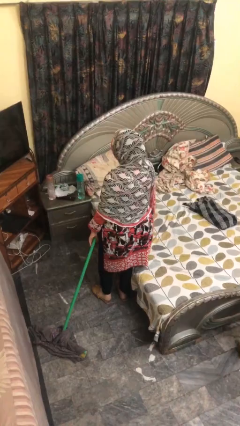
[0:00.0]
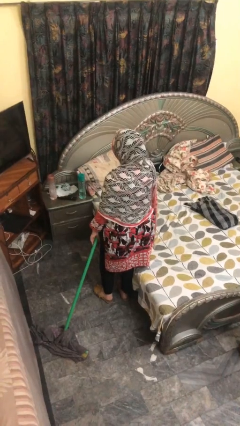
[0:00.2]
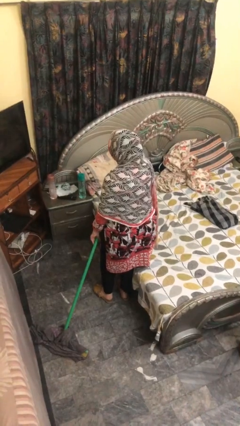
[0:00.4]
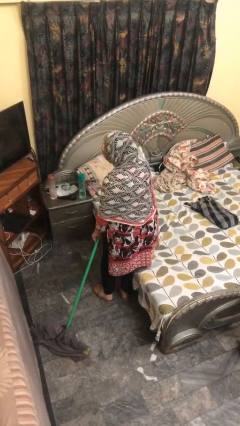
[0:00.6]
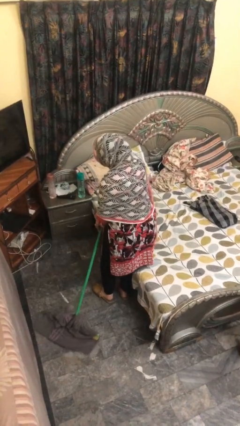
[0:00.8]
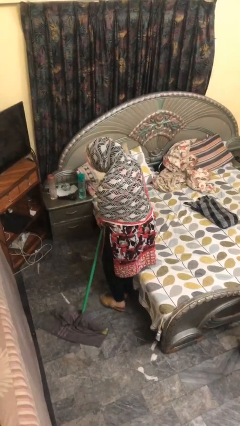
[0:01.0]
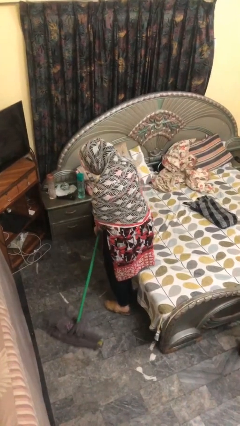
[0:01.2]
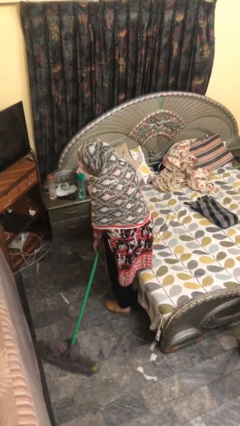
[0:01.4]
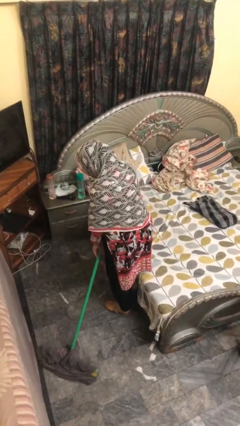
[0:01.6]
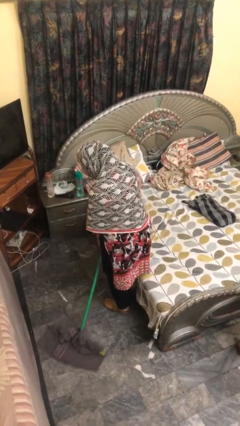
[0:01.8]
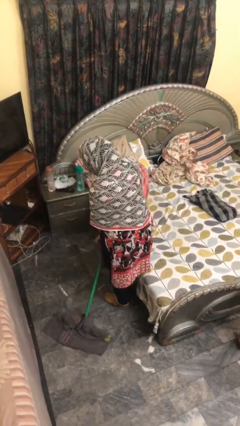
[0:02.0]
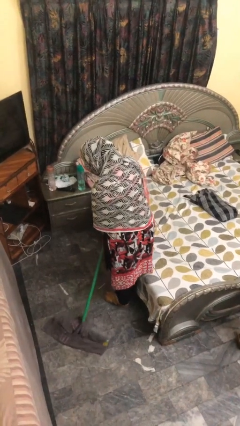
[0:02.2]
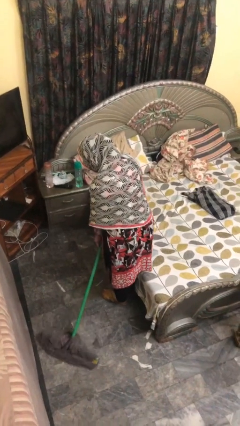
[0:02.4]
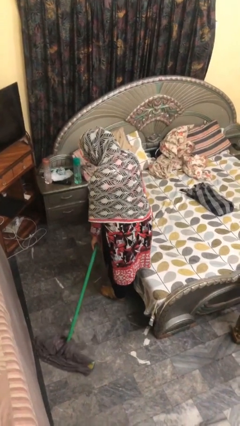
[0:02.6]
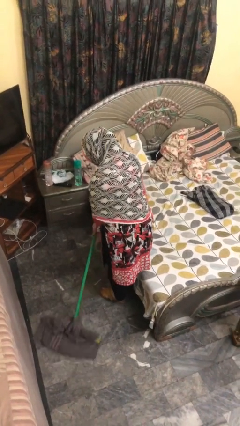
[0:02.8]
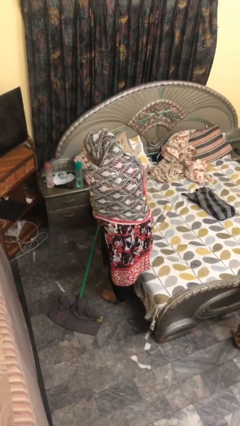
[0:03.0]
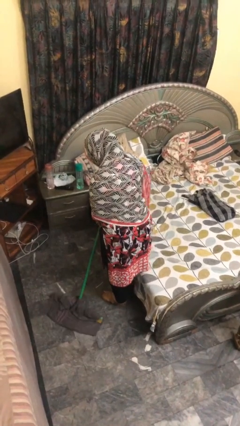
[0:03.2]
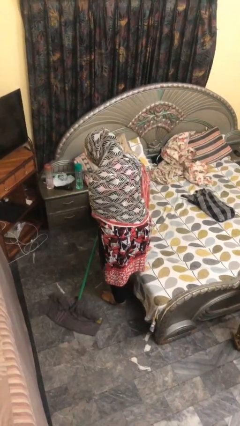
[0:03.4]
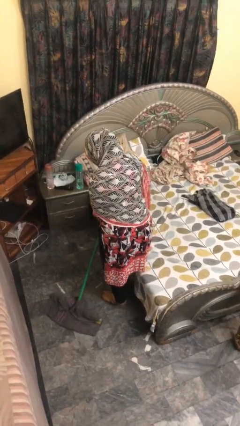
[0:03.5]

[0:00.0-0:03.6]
person mops

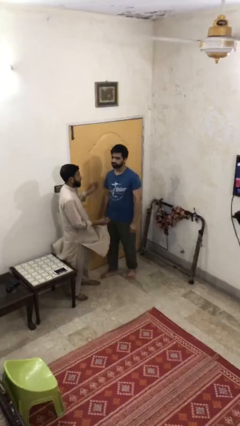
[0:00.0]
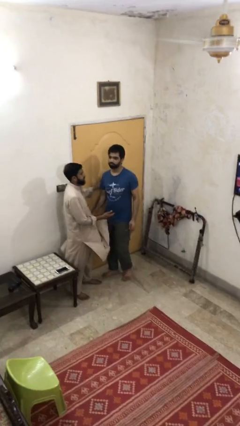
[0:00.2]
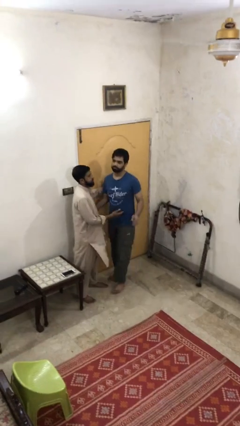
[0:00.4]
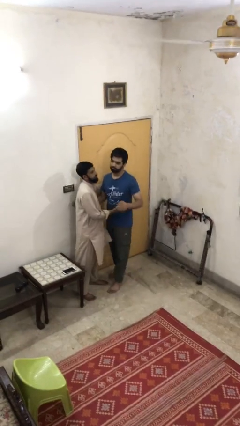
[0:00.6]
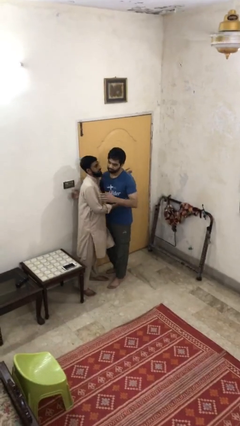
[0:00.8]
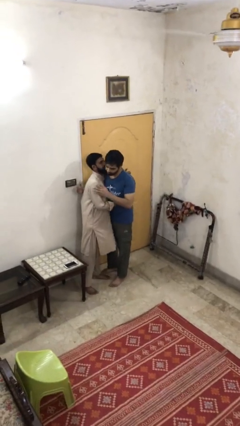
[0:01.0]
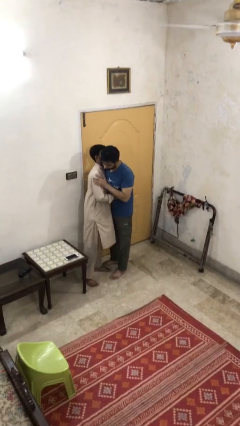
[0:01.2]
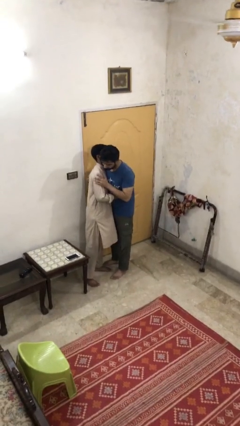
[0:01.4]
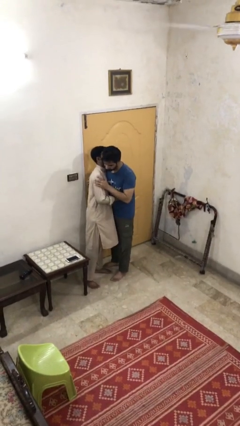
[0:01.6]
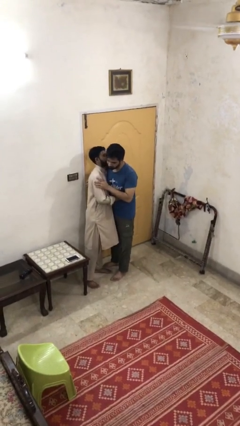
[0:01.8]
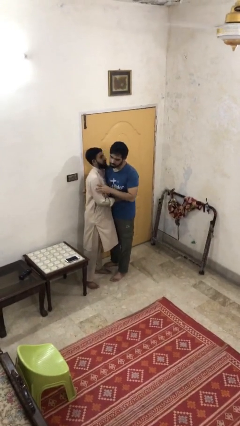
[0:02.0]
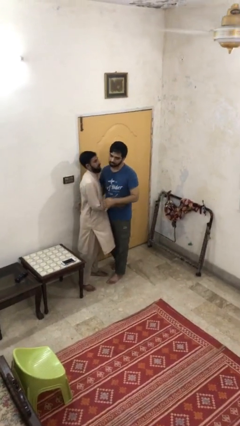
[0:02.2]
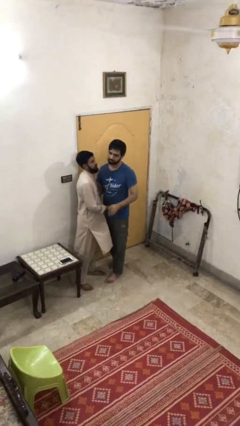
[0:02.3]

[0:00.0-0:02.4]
person embraces person

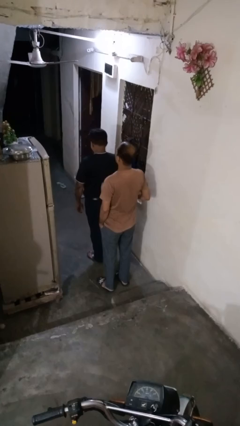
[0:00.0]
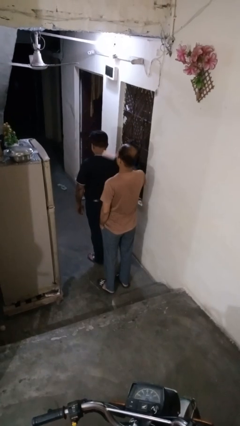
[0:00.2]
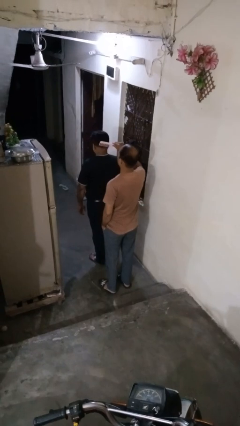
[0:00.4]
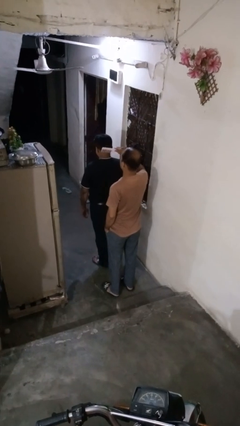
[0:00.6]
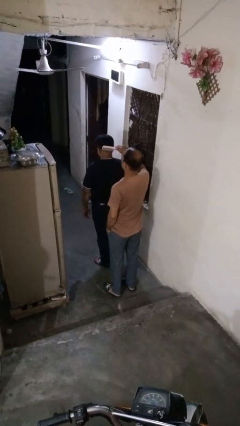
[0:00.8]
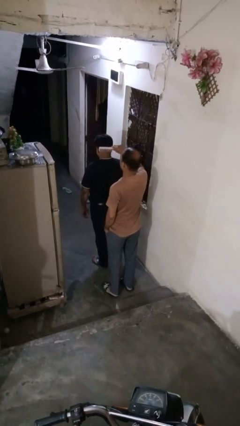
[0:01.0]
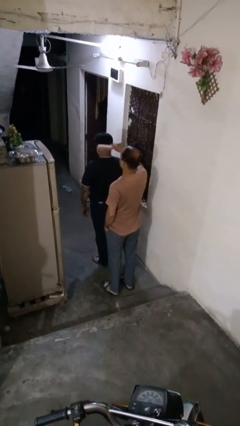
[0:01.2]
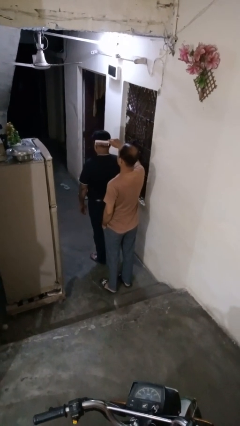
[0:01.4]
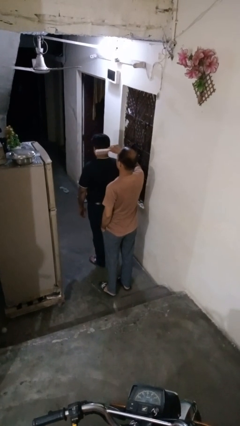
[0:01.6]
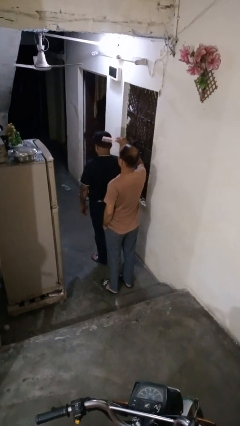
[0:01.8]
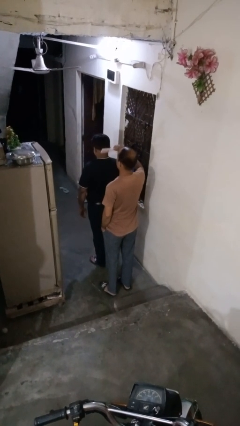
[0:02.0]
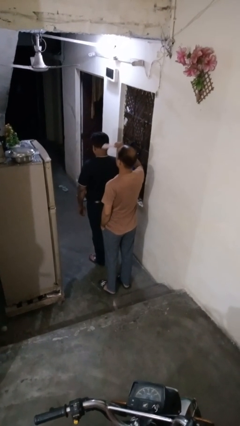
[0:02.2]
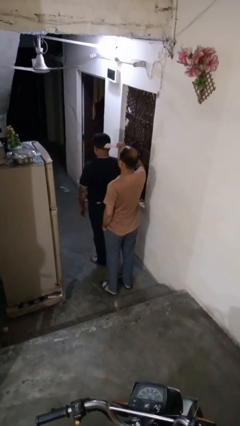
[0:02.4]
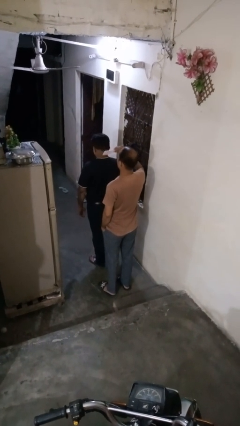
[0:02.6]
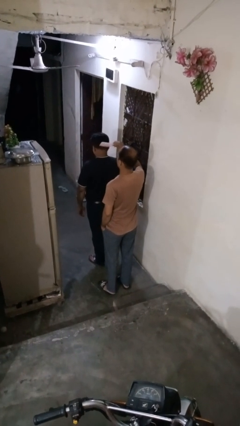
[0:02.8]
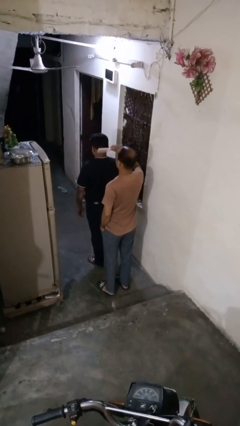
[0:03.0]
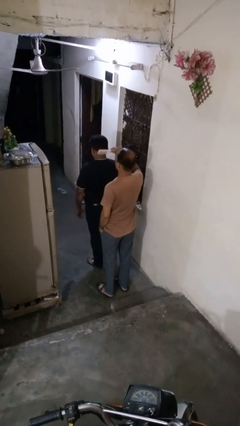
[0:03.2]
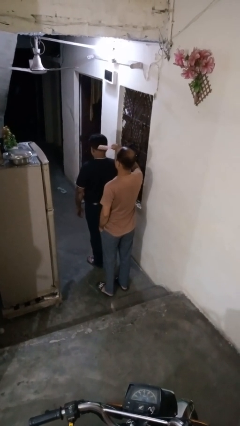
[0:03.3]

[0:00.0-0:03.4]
person brushes hair of person

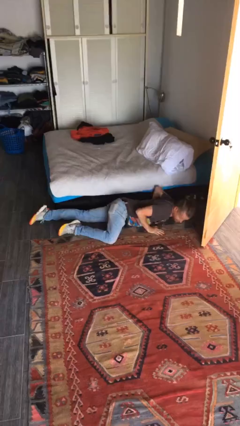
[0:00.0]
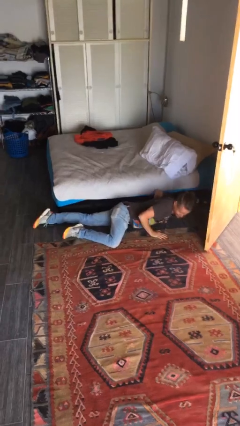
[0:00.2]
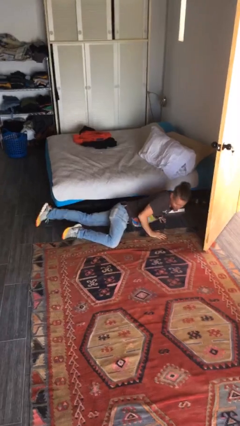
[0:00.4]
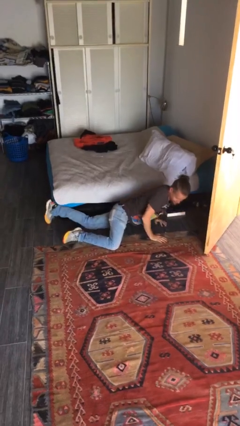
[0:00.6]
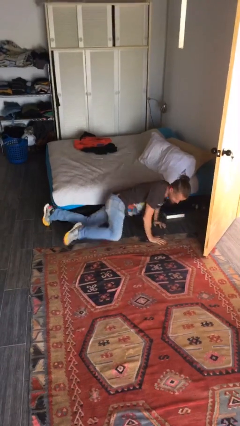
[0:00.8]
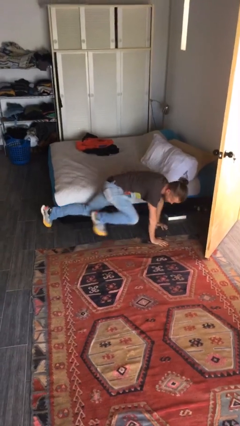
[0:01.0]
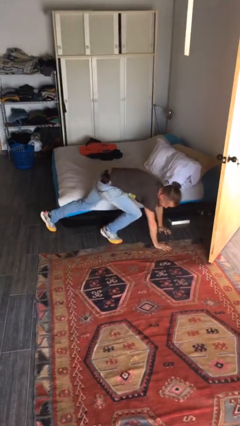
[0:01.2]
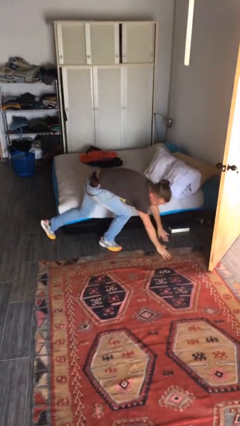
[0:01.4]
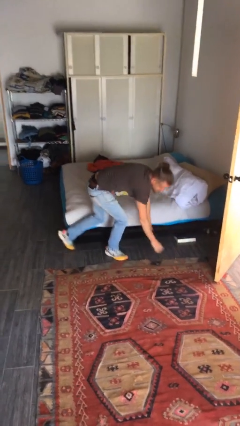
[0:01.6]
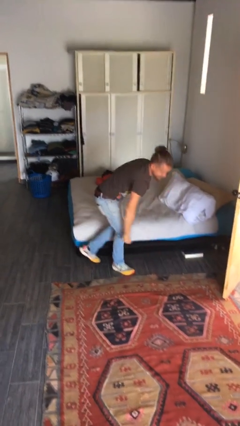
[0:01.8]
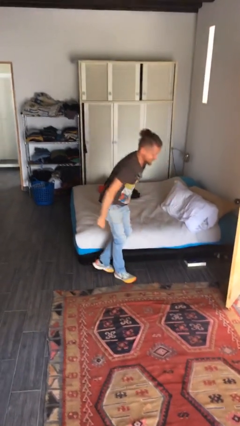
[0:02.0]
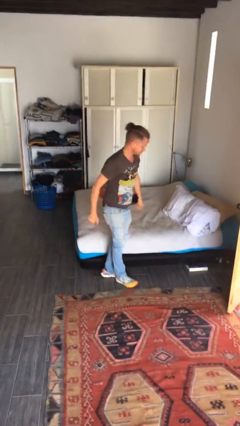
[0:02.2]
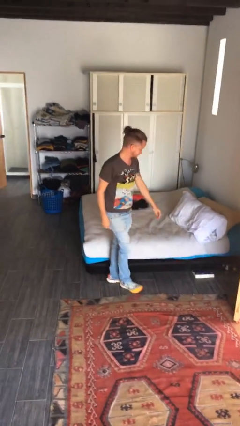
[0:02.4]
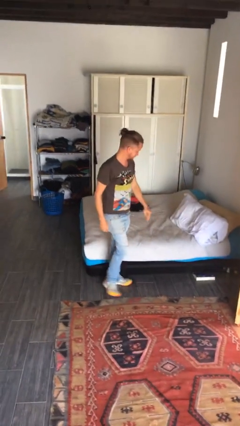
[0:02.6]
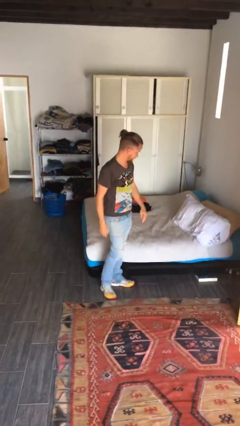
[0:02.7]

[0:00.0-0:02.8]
person stands up from floor

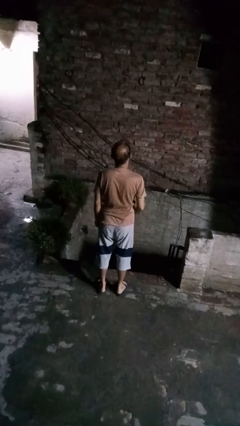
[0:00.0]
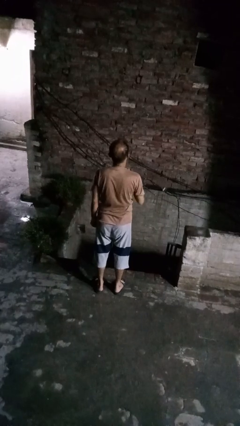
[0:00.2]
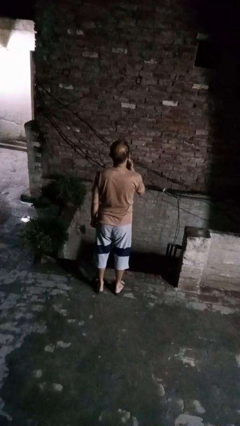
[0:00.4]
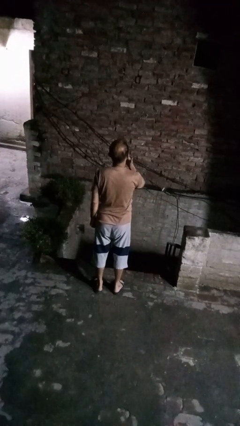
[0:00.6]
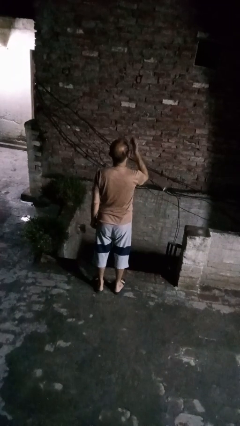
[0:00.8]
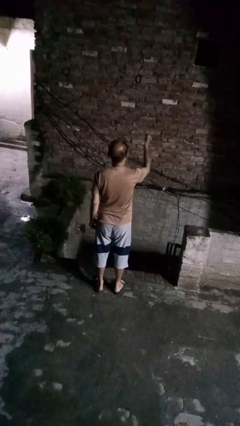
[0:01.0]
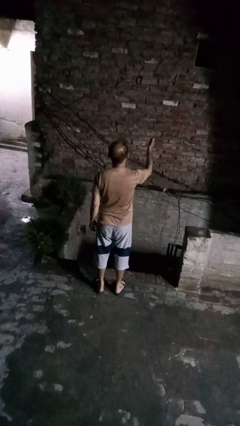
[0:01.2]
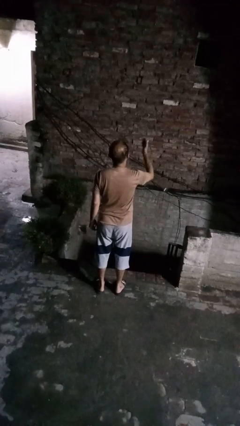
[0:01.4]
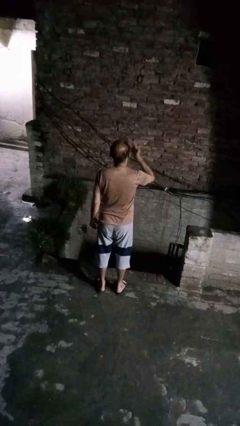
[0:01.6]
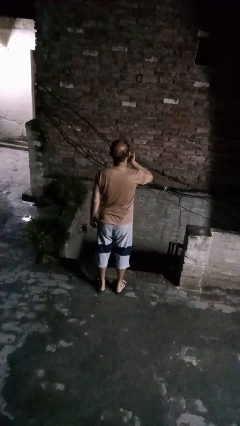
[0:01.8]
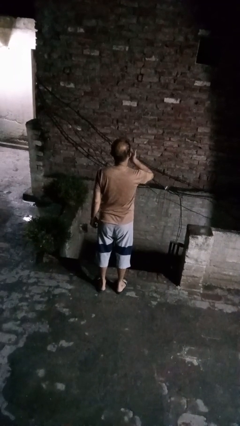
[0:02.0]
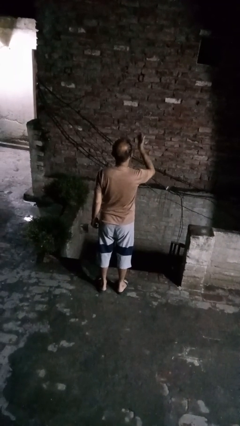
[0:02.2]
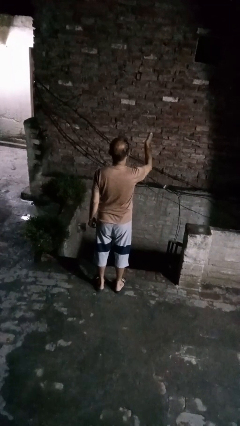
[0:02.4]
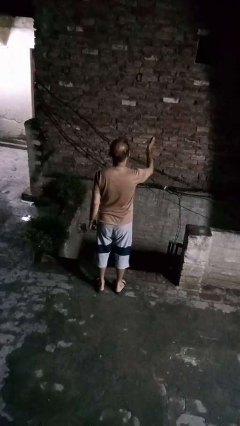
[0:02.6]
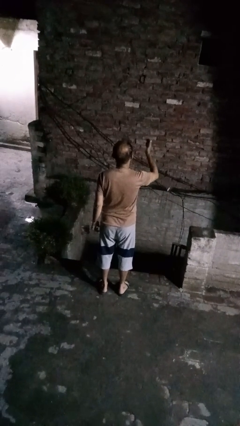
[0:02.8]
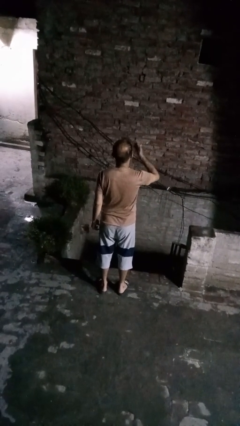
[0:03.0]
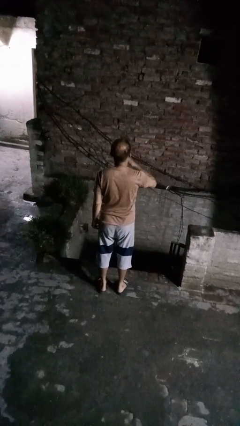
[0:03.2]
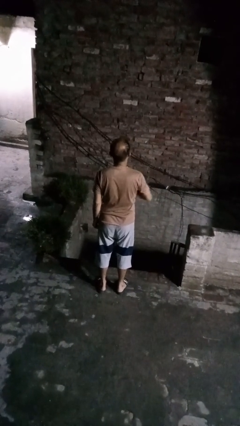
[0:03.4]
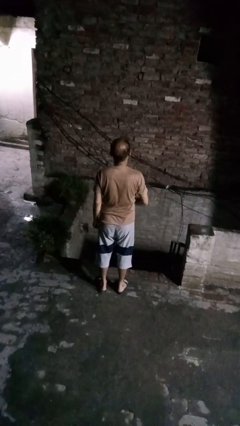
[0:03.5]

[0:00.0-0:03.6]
person gestures blow kiss

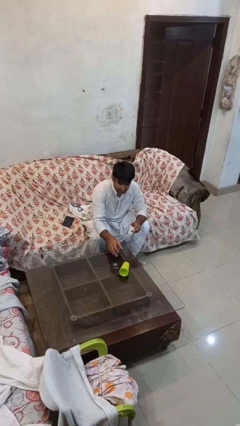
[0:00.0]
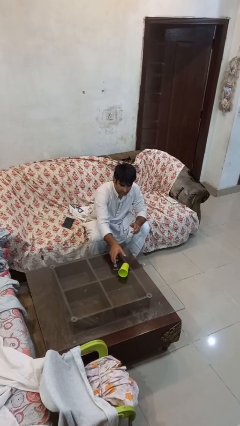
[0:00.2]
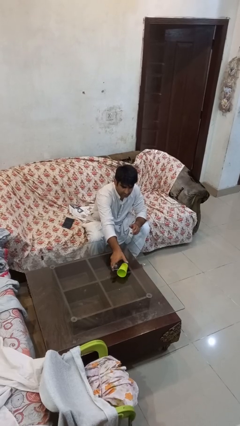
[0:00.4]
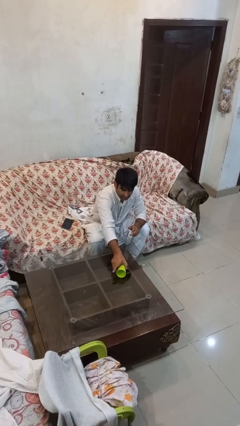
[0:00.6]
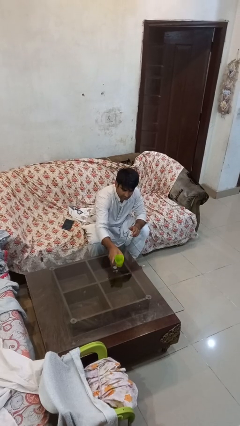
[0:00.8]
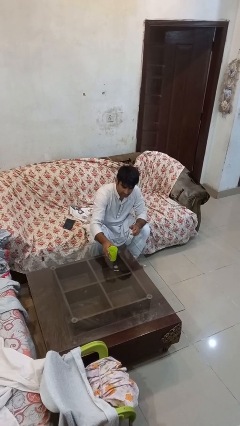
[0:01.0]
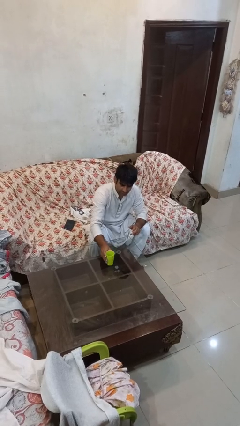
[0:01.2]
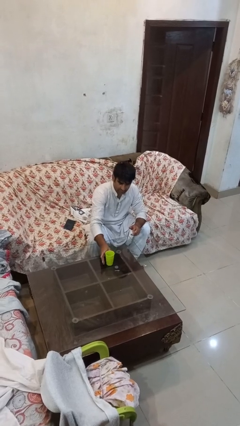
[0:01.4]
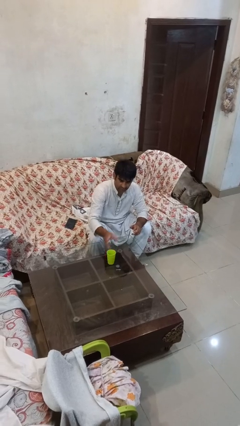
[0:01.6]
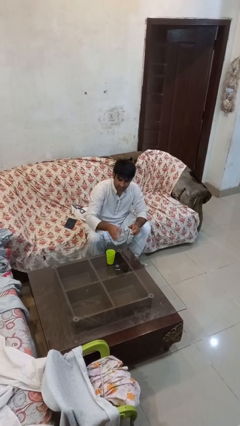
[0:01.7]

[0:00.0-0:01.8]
person sets upright glass

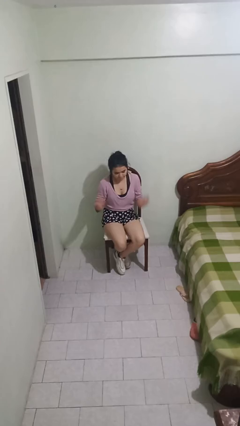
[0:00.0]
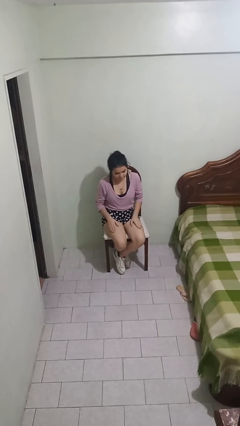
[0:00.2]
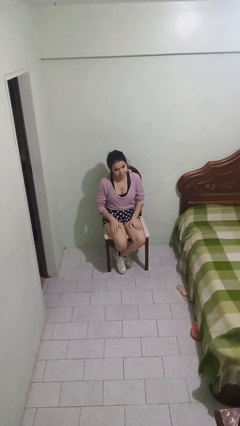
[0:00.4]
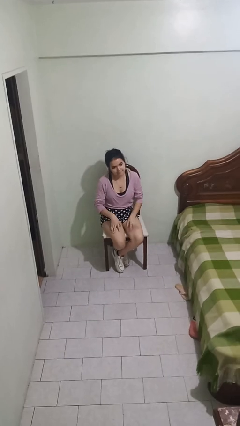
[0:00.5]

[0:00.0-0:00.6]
person slaps hands on thighs
